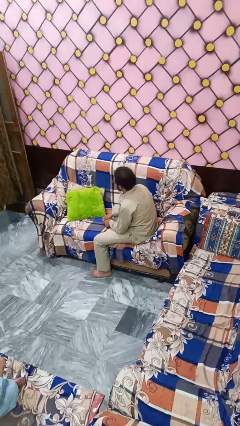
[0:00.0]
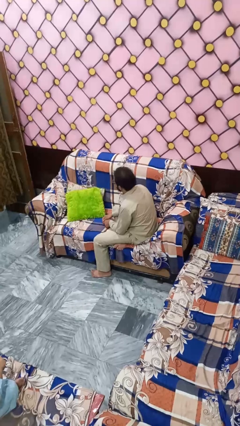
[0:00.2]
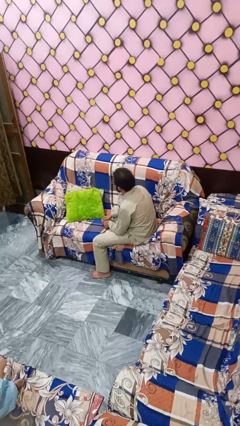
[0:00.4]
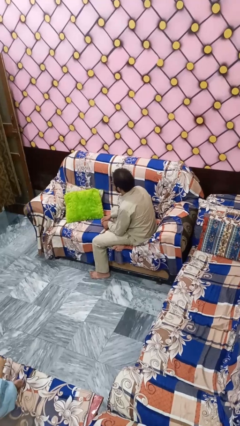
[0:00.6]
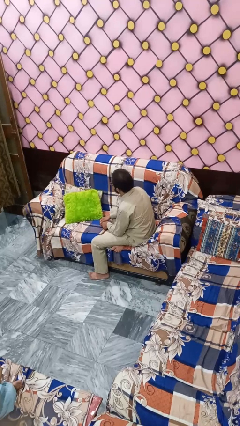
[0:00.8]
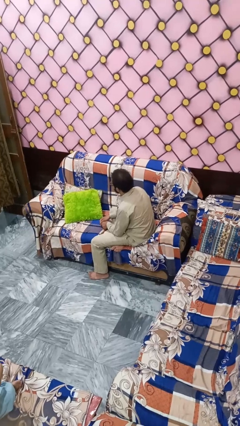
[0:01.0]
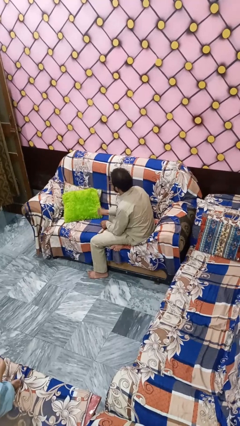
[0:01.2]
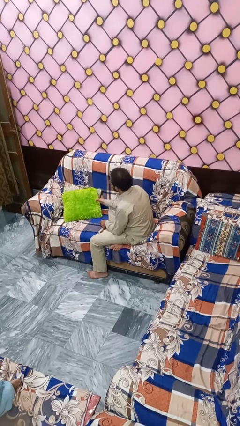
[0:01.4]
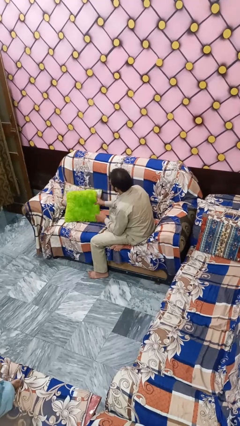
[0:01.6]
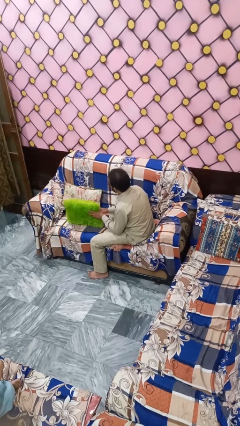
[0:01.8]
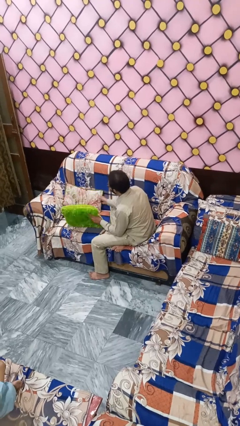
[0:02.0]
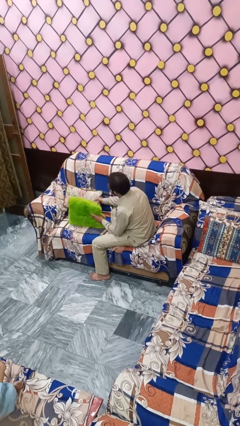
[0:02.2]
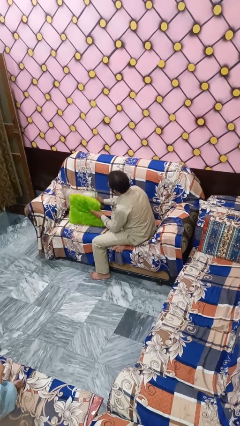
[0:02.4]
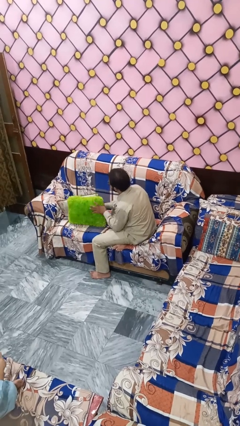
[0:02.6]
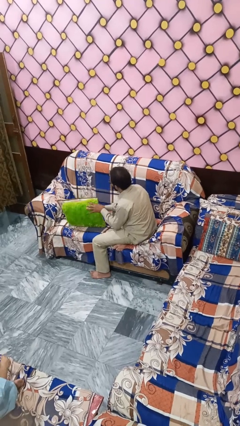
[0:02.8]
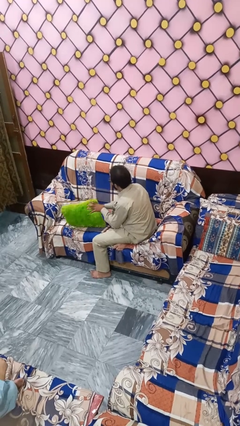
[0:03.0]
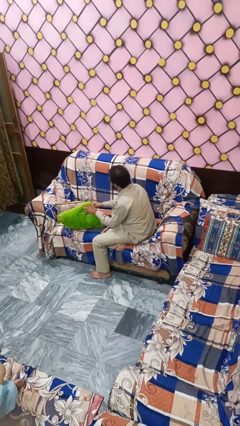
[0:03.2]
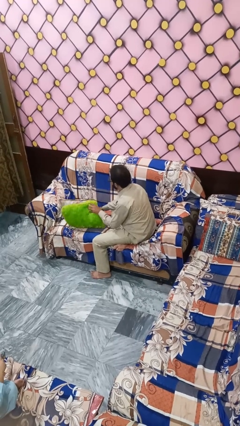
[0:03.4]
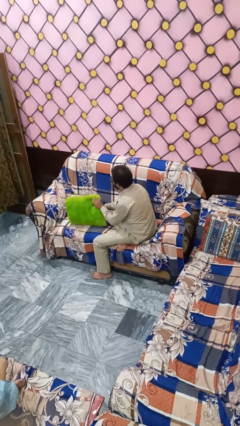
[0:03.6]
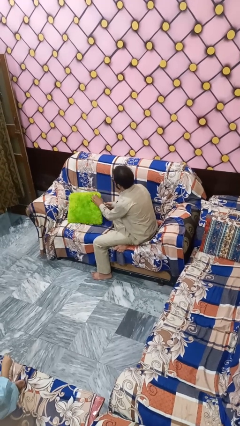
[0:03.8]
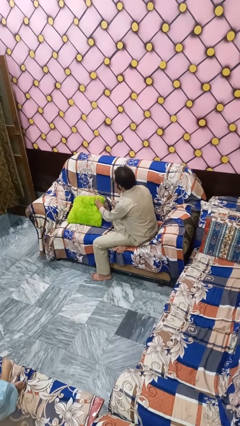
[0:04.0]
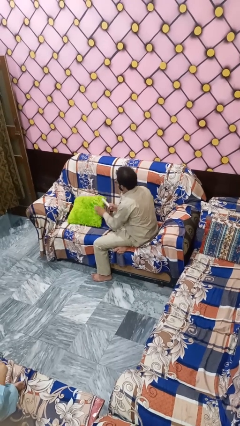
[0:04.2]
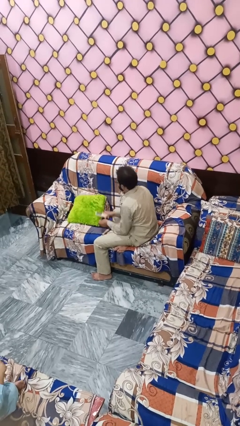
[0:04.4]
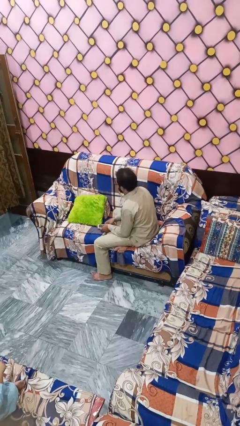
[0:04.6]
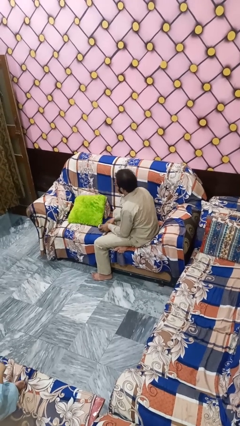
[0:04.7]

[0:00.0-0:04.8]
person searches in couch

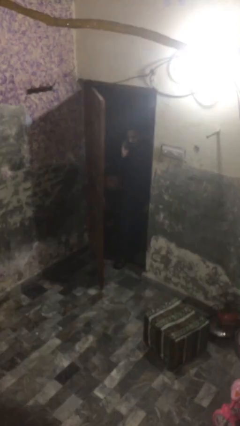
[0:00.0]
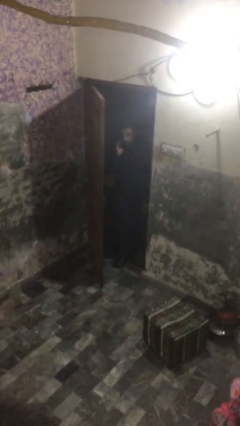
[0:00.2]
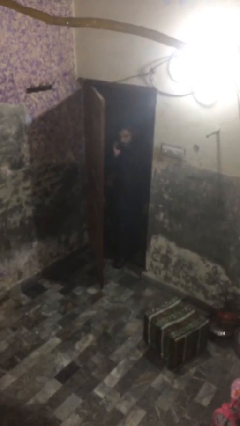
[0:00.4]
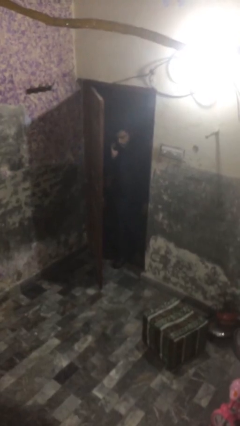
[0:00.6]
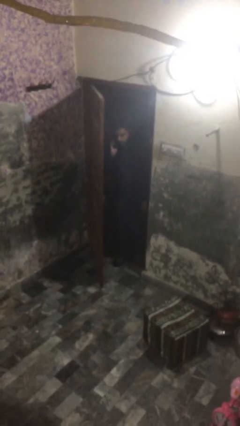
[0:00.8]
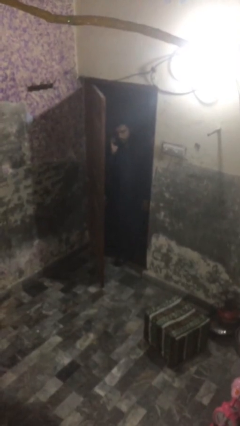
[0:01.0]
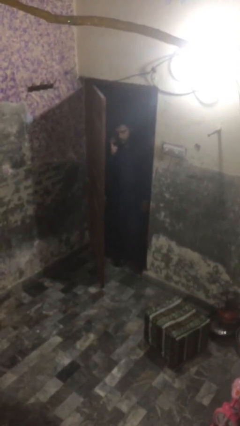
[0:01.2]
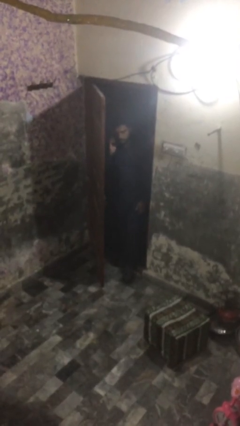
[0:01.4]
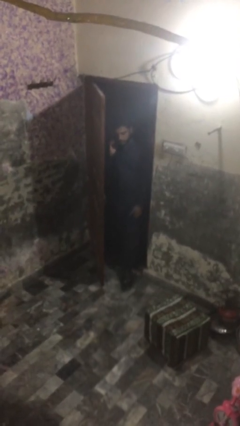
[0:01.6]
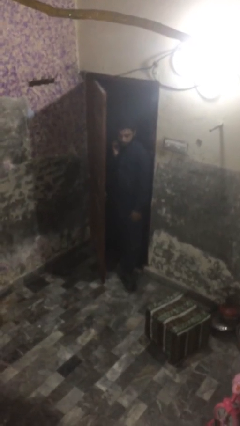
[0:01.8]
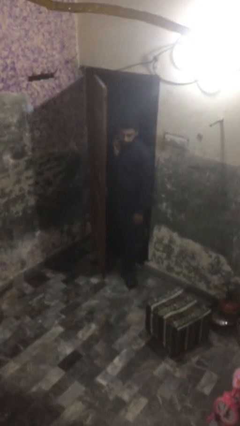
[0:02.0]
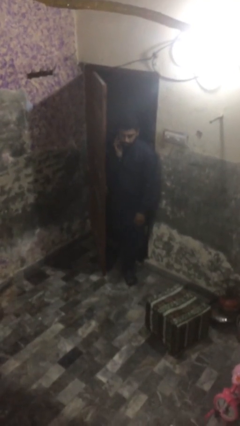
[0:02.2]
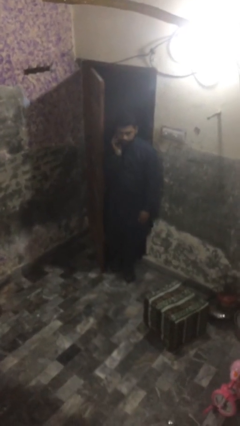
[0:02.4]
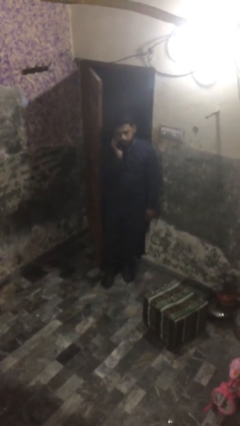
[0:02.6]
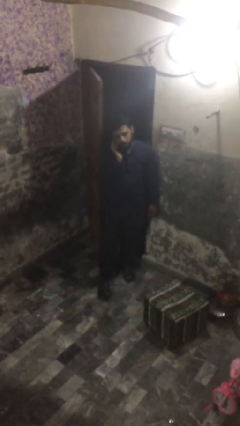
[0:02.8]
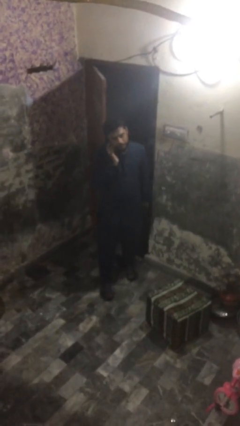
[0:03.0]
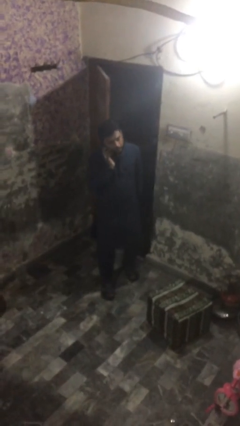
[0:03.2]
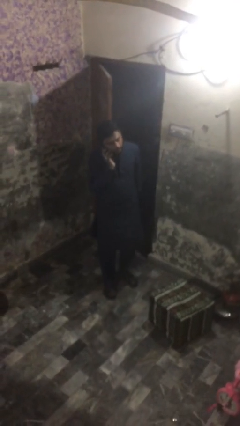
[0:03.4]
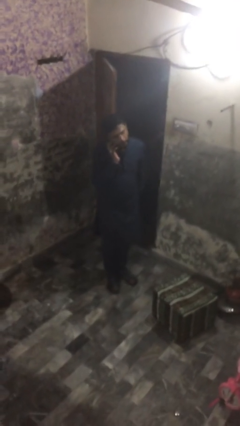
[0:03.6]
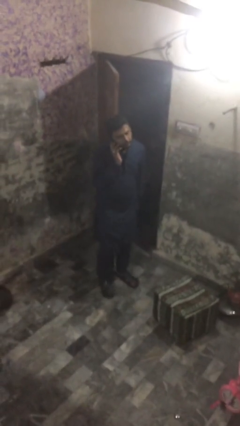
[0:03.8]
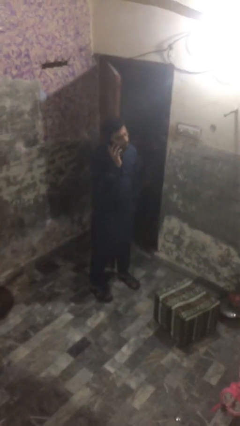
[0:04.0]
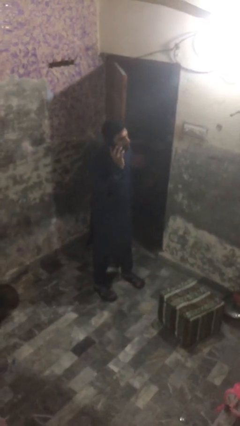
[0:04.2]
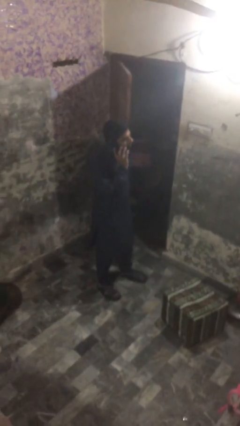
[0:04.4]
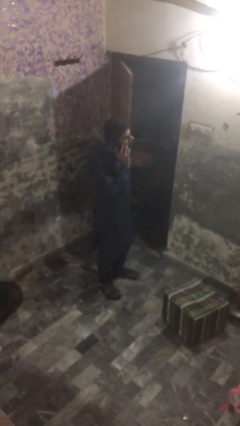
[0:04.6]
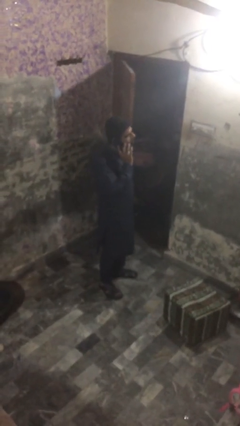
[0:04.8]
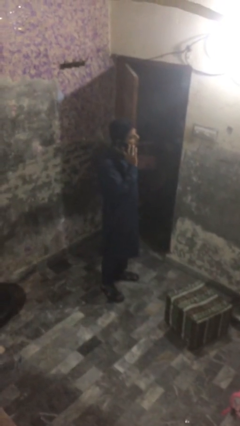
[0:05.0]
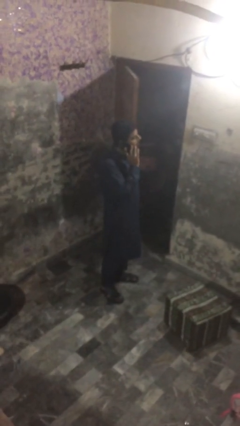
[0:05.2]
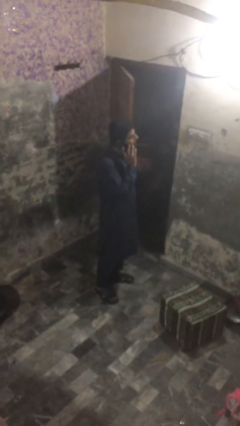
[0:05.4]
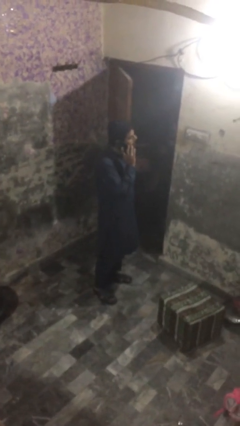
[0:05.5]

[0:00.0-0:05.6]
person enters scene through structure

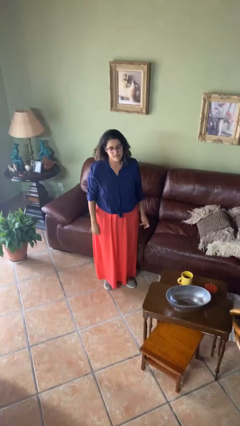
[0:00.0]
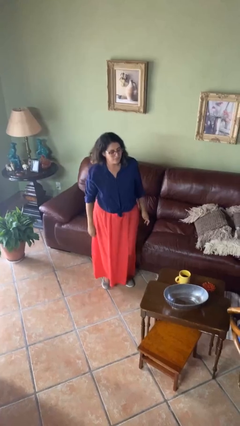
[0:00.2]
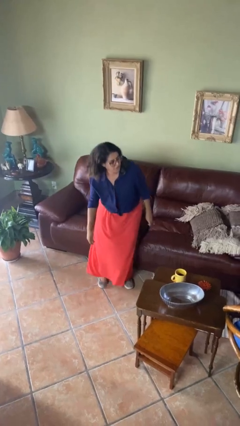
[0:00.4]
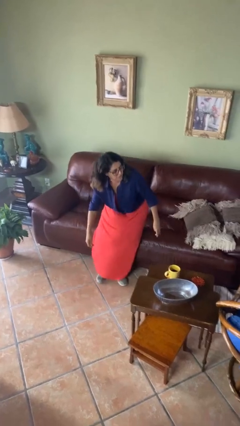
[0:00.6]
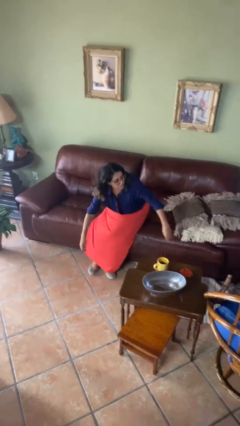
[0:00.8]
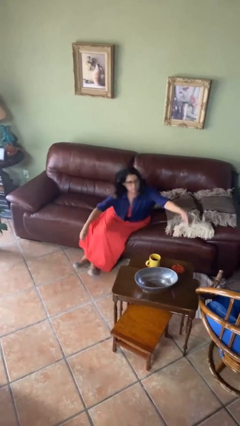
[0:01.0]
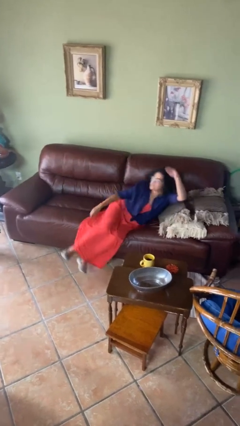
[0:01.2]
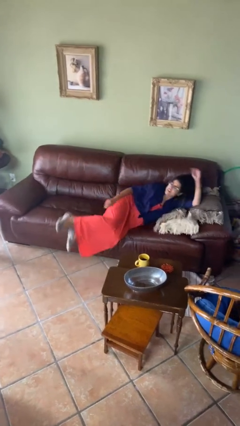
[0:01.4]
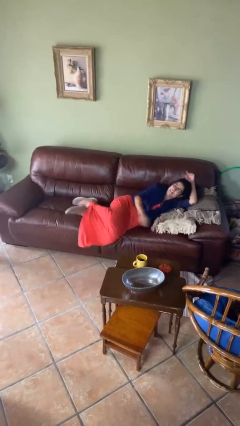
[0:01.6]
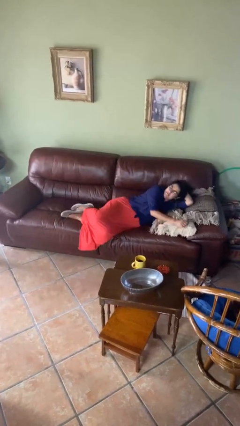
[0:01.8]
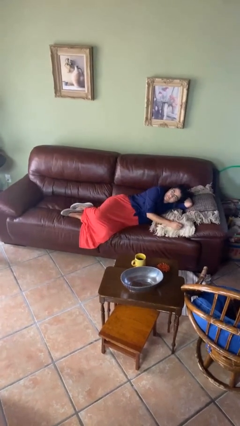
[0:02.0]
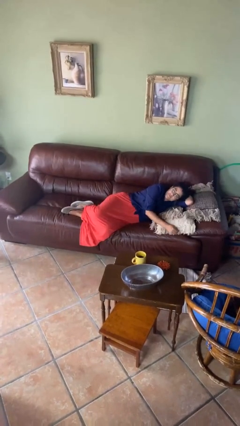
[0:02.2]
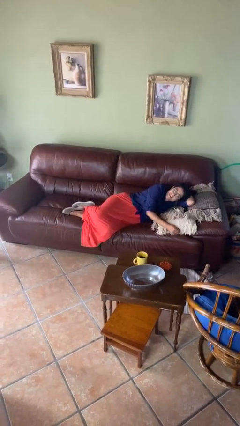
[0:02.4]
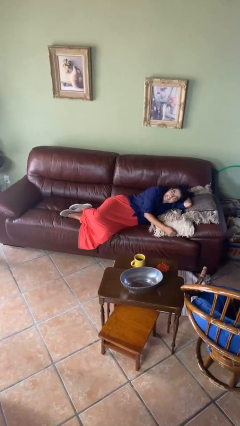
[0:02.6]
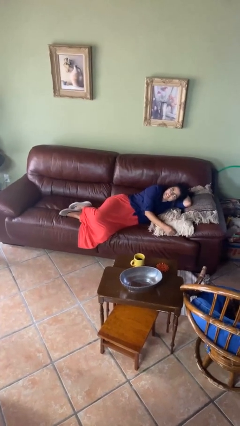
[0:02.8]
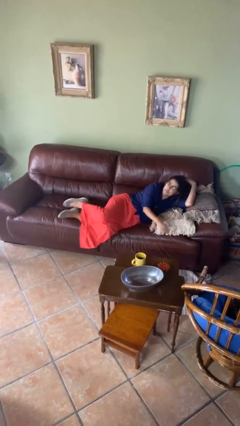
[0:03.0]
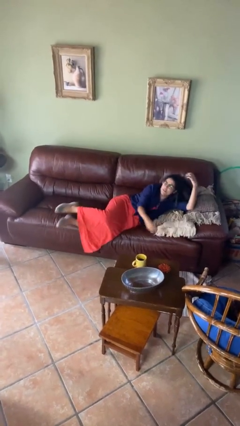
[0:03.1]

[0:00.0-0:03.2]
person lies down on couch

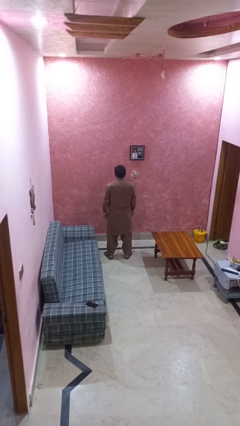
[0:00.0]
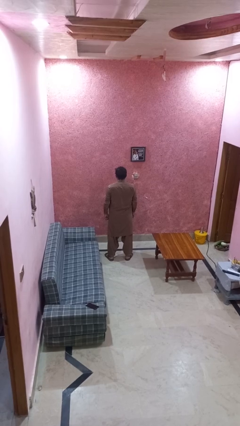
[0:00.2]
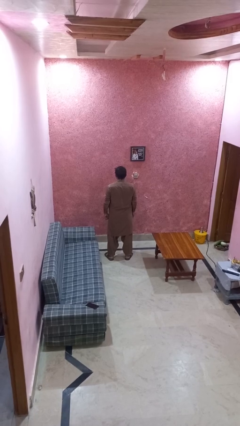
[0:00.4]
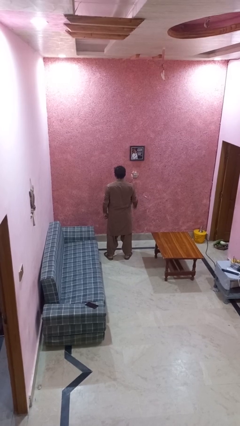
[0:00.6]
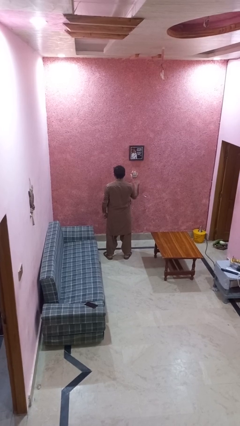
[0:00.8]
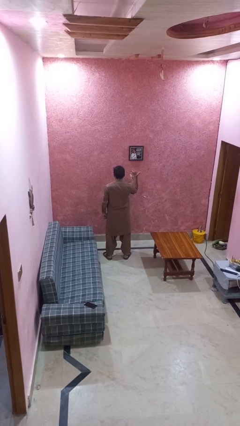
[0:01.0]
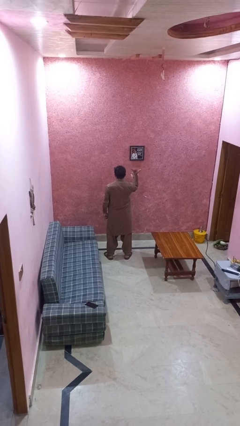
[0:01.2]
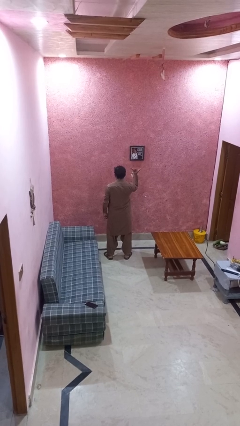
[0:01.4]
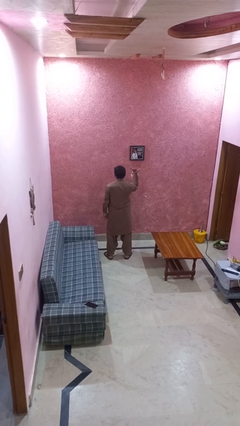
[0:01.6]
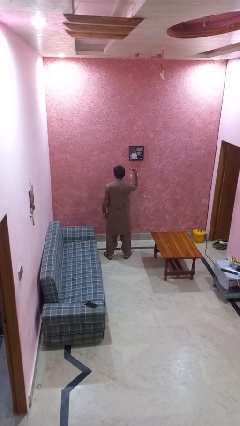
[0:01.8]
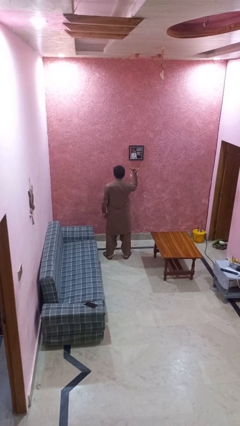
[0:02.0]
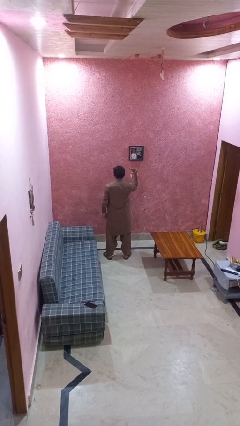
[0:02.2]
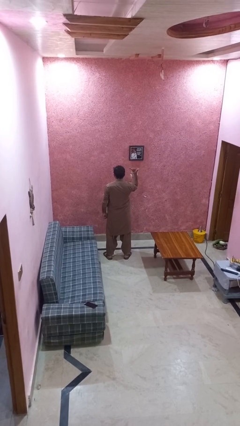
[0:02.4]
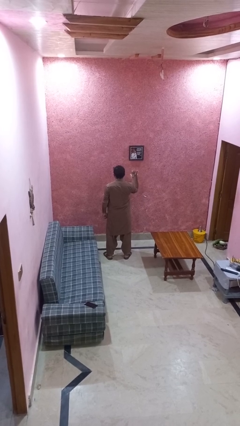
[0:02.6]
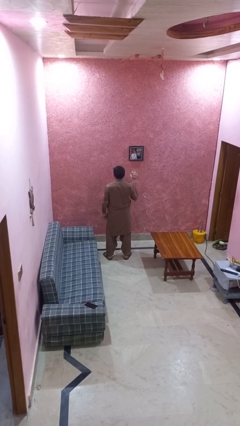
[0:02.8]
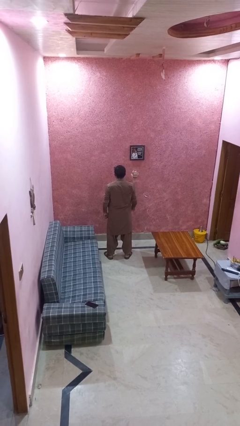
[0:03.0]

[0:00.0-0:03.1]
person gestures hang loose

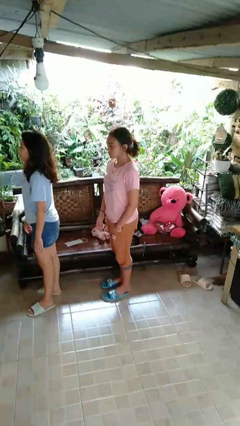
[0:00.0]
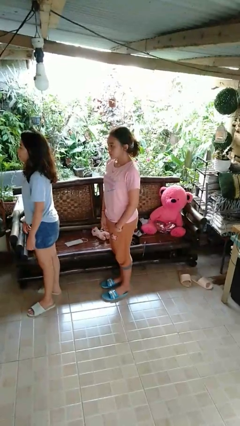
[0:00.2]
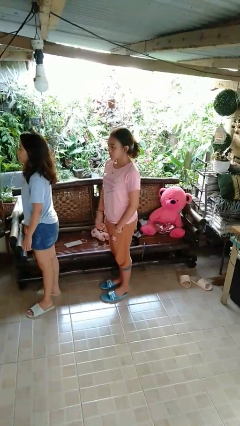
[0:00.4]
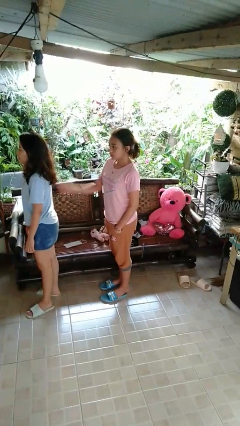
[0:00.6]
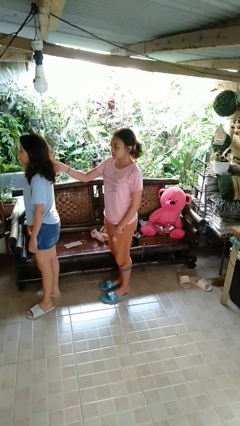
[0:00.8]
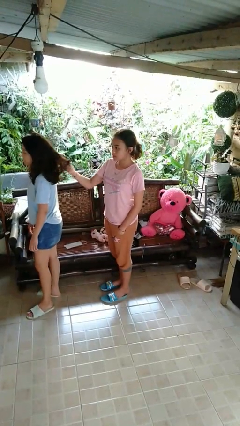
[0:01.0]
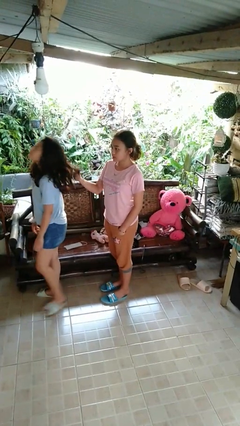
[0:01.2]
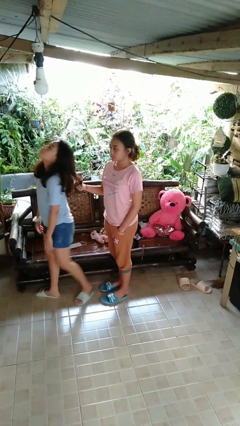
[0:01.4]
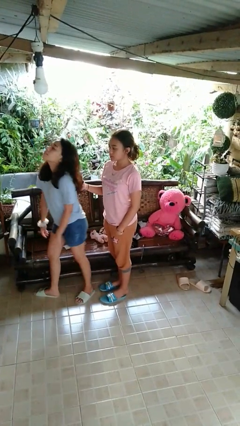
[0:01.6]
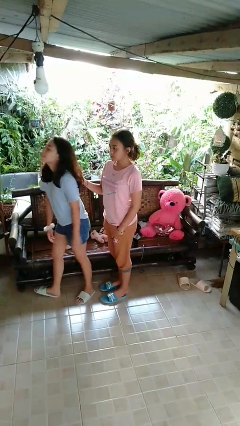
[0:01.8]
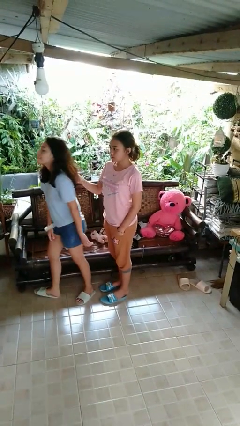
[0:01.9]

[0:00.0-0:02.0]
person grabs person by hair
